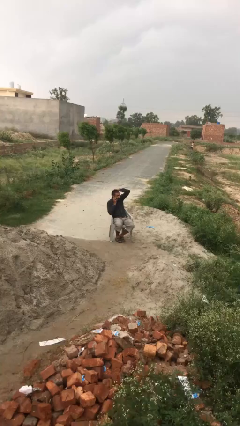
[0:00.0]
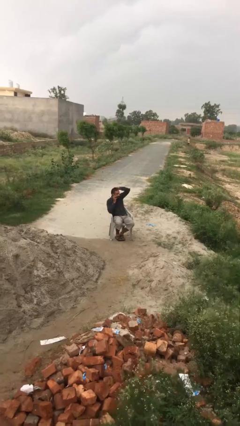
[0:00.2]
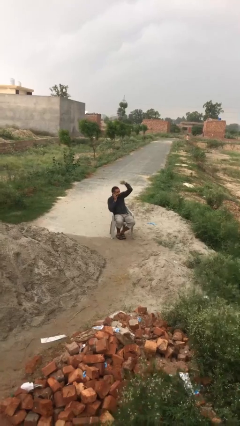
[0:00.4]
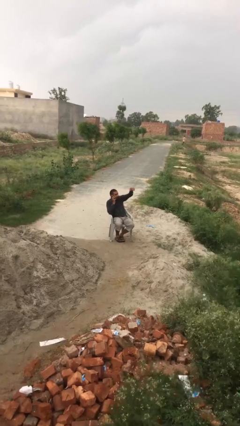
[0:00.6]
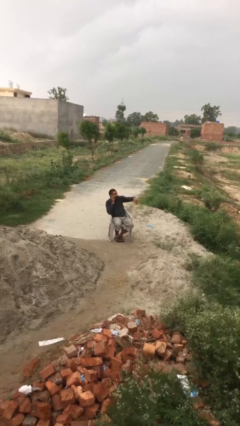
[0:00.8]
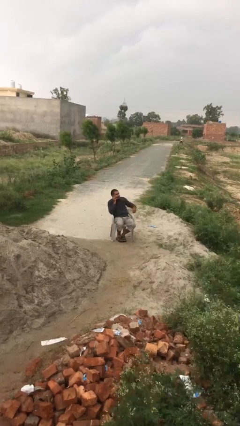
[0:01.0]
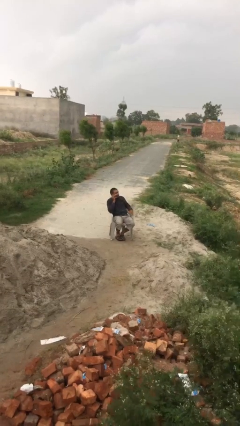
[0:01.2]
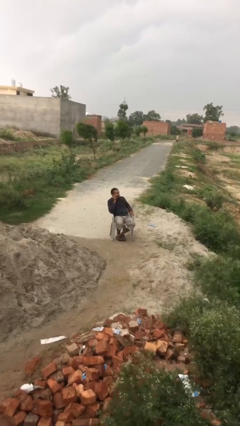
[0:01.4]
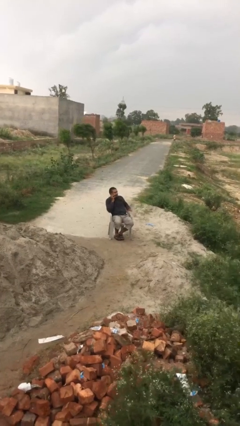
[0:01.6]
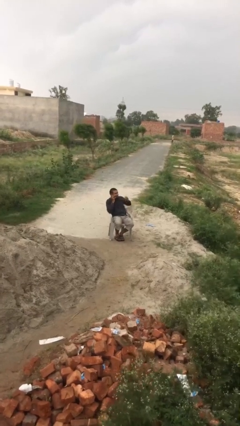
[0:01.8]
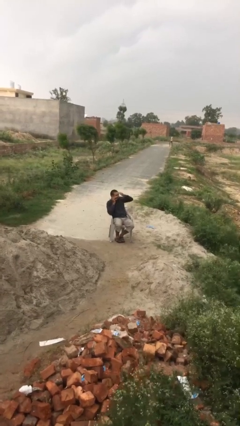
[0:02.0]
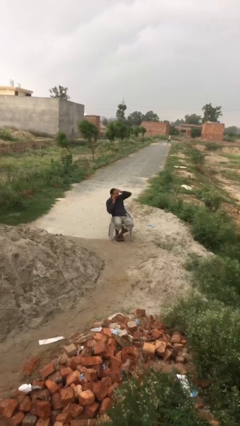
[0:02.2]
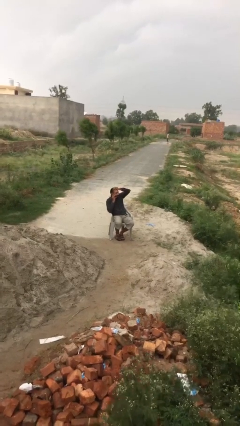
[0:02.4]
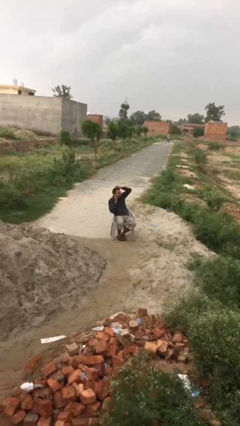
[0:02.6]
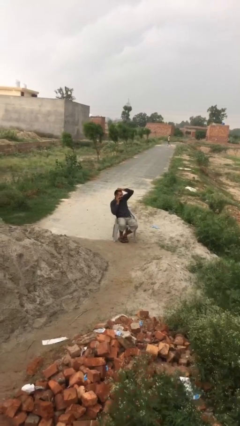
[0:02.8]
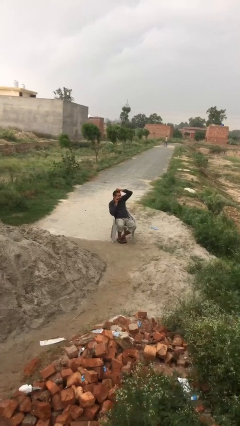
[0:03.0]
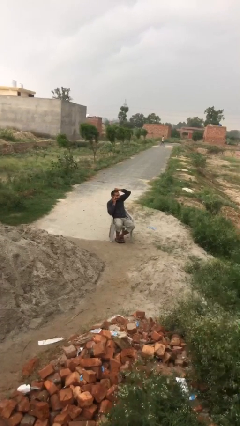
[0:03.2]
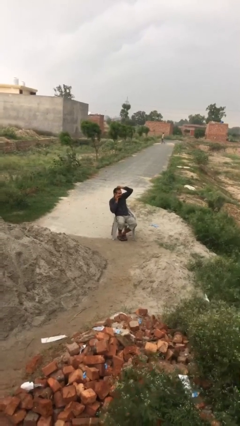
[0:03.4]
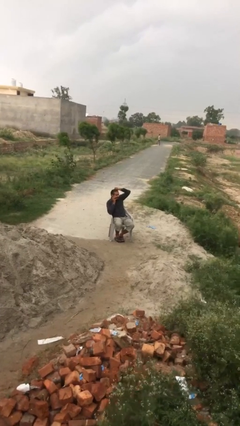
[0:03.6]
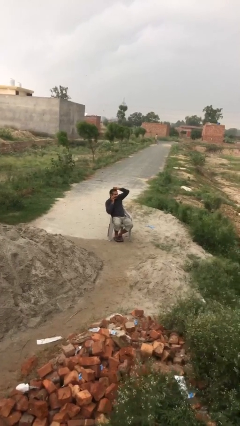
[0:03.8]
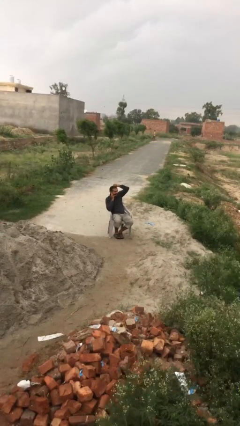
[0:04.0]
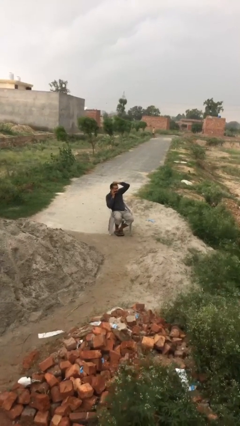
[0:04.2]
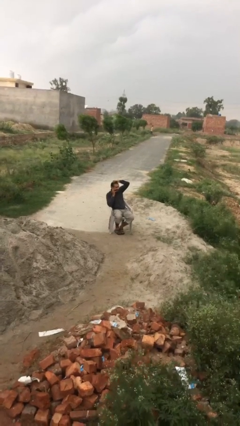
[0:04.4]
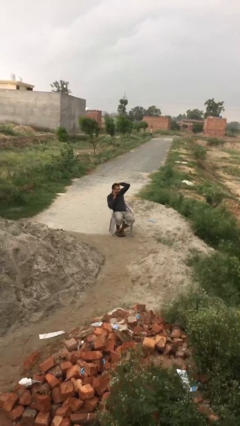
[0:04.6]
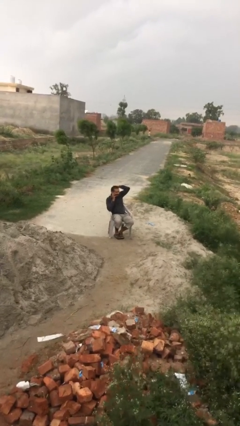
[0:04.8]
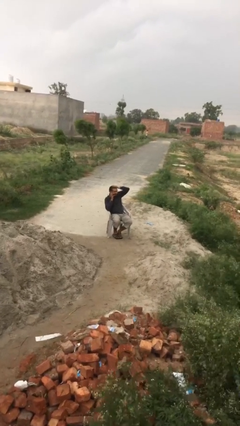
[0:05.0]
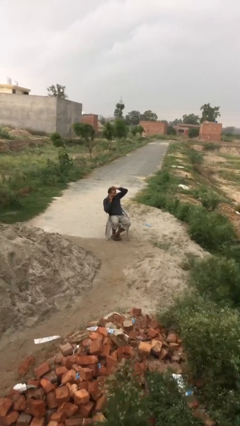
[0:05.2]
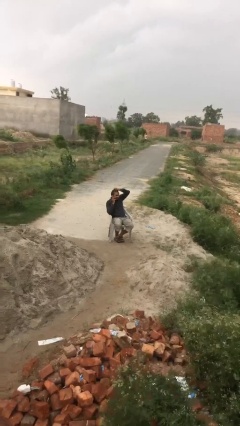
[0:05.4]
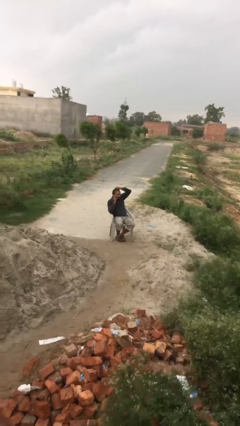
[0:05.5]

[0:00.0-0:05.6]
person talks on phone

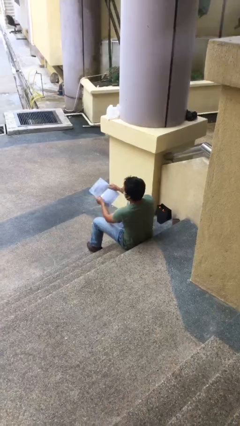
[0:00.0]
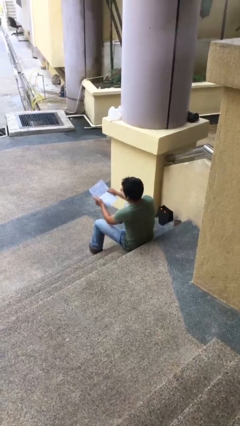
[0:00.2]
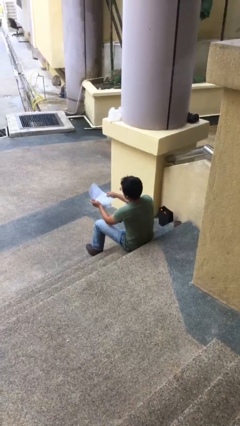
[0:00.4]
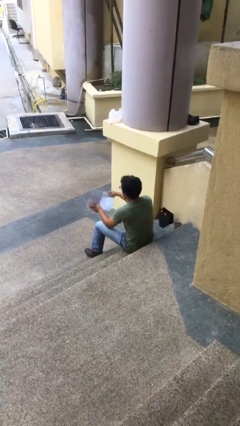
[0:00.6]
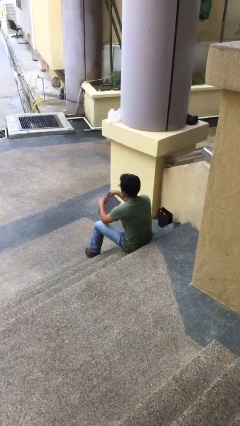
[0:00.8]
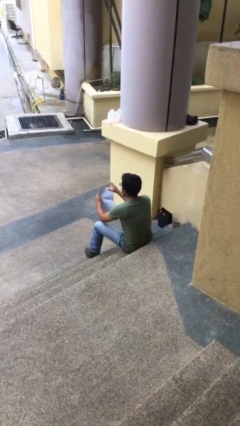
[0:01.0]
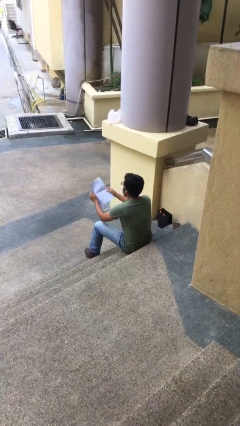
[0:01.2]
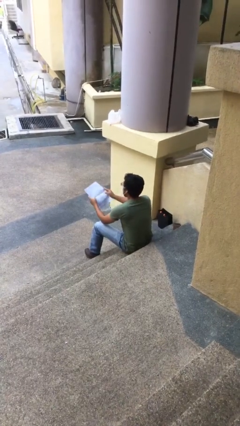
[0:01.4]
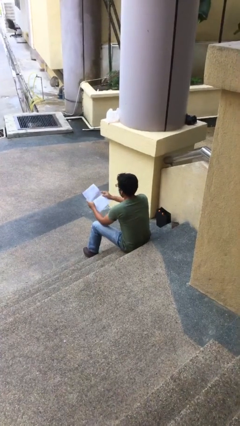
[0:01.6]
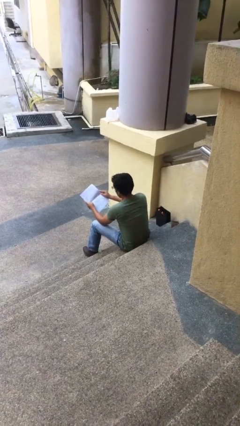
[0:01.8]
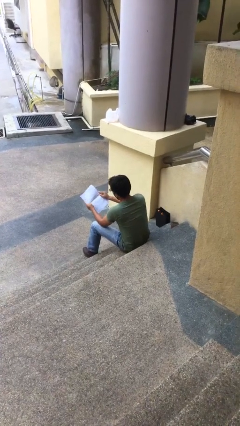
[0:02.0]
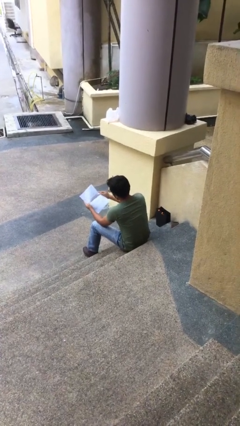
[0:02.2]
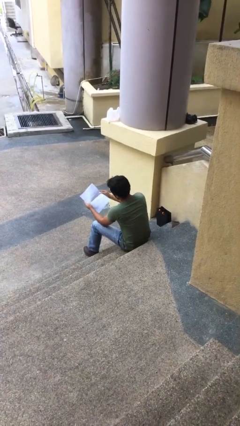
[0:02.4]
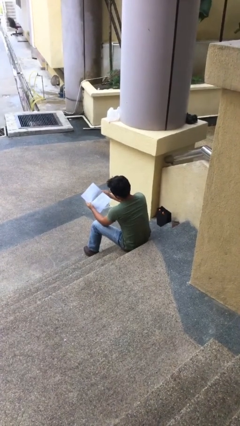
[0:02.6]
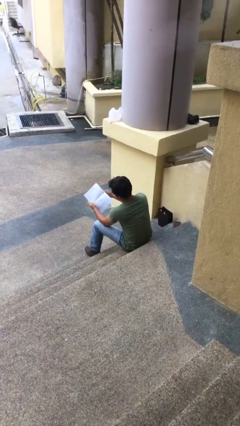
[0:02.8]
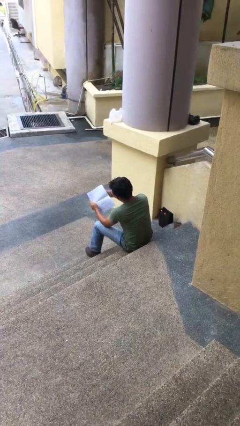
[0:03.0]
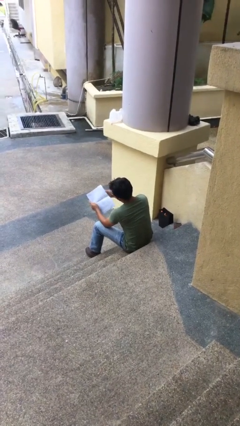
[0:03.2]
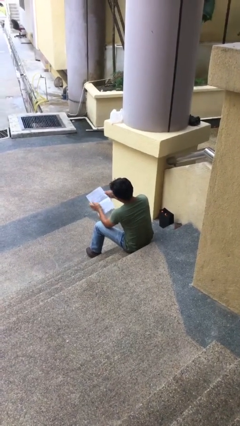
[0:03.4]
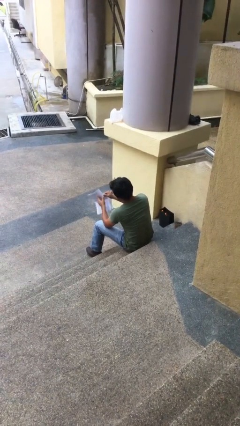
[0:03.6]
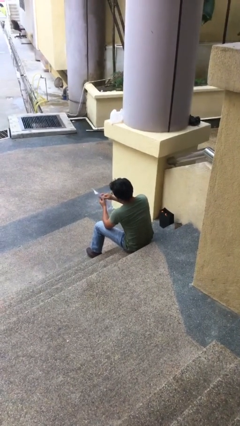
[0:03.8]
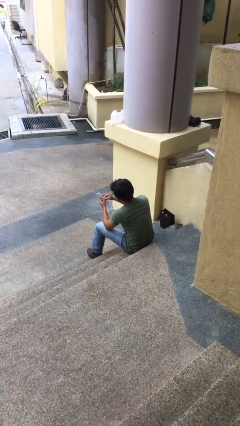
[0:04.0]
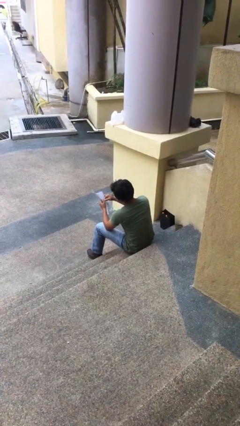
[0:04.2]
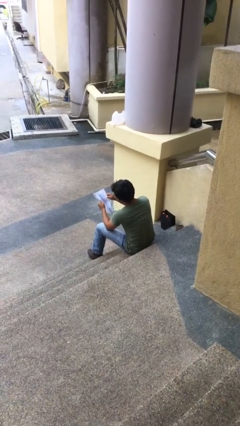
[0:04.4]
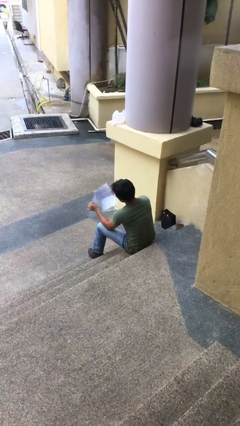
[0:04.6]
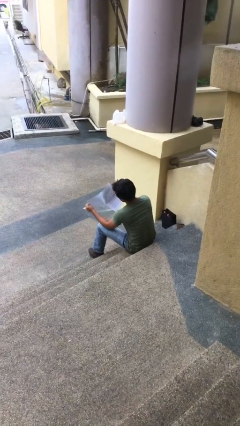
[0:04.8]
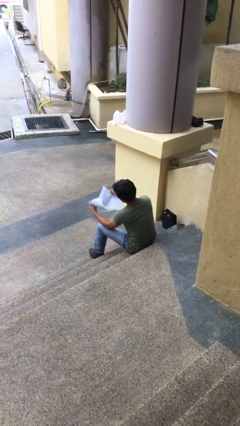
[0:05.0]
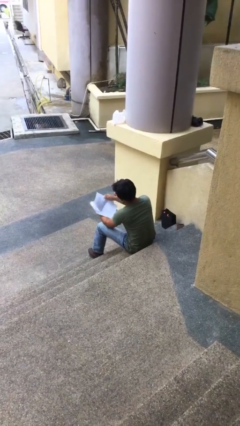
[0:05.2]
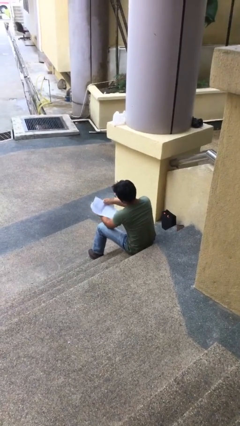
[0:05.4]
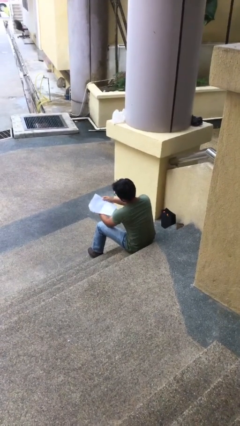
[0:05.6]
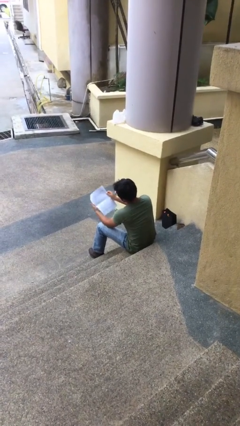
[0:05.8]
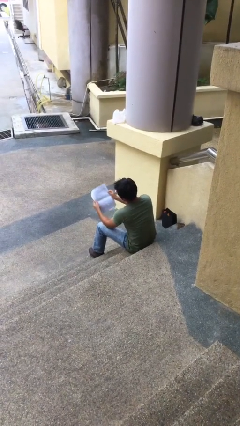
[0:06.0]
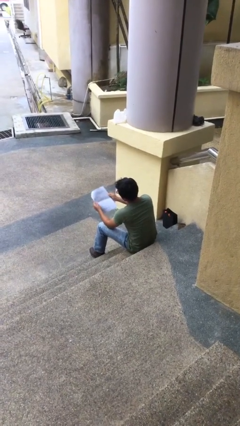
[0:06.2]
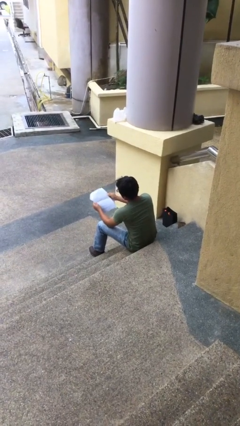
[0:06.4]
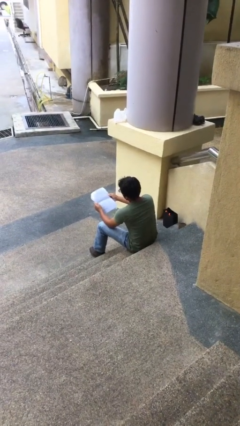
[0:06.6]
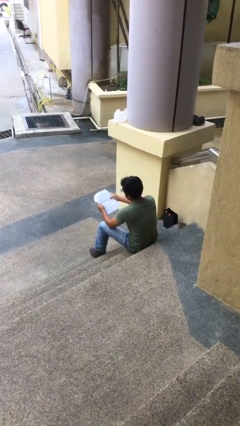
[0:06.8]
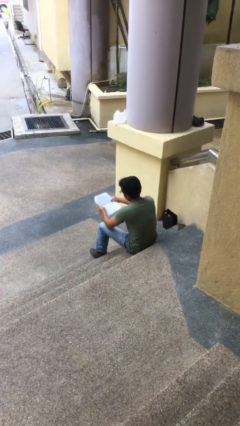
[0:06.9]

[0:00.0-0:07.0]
person reads document

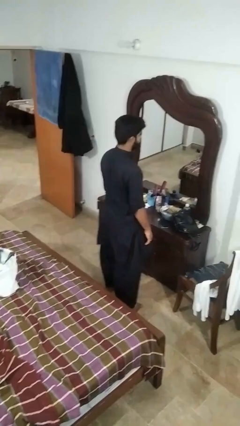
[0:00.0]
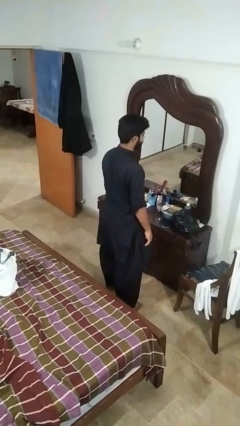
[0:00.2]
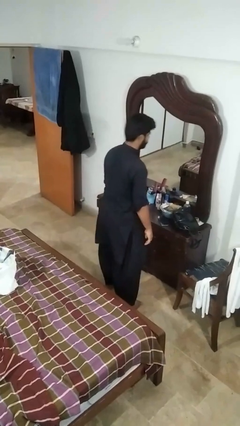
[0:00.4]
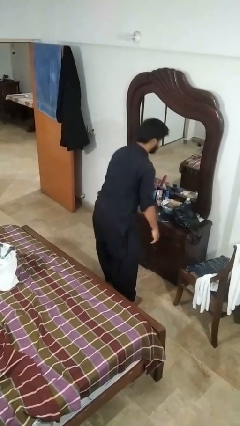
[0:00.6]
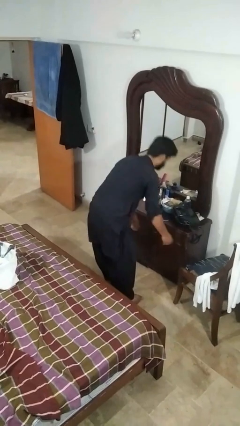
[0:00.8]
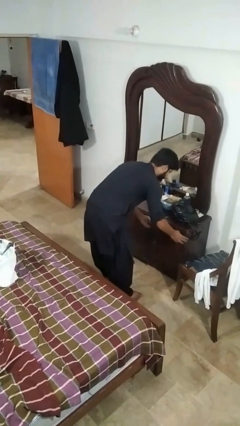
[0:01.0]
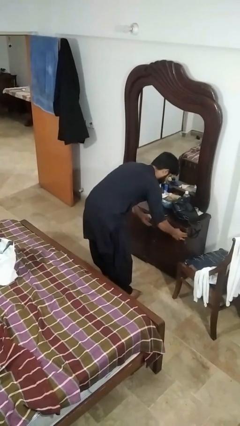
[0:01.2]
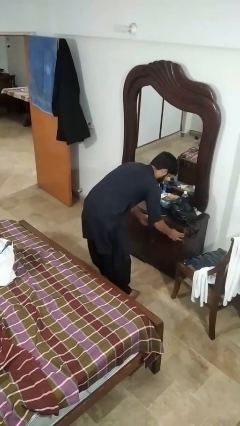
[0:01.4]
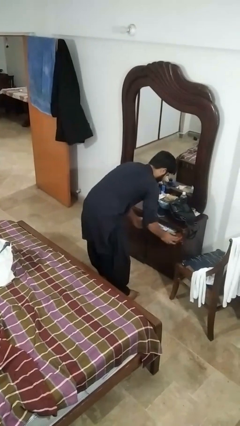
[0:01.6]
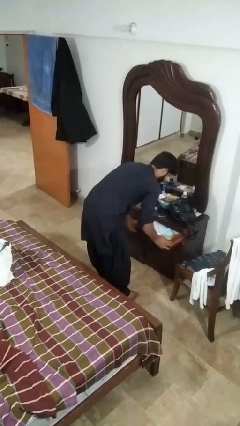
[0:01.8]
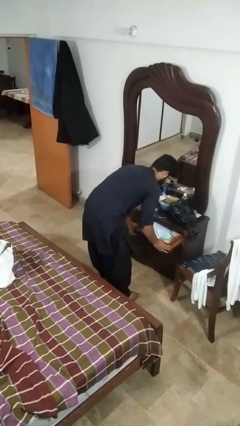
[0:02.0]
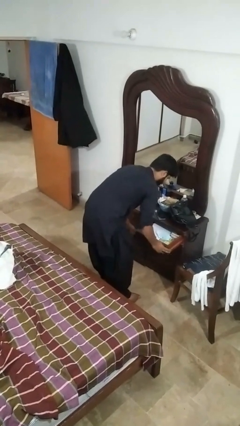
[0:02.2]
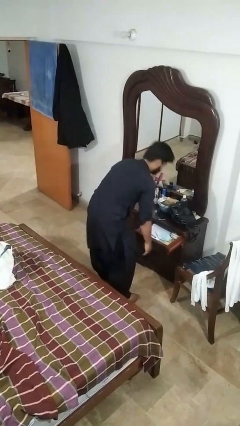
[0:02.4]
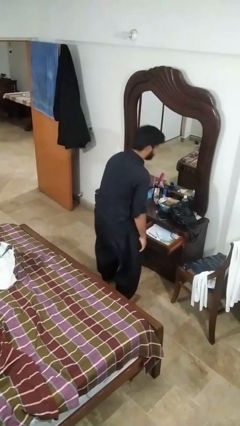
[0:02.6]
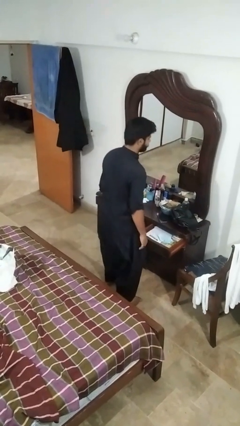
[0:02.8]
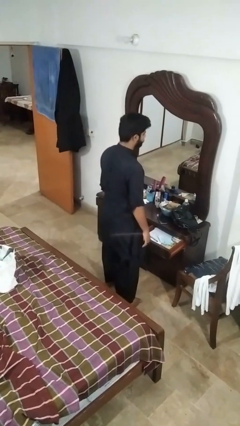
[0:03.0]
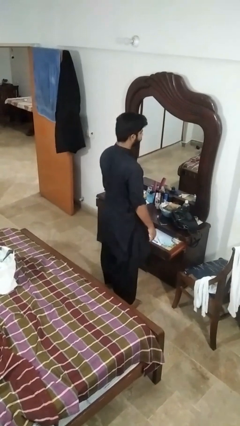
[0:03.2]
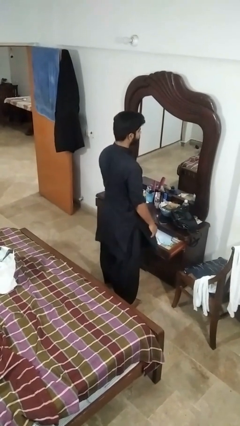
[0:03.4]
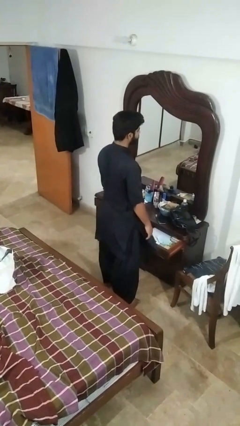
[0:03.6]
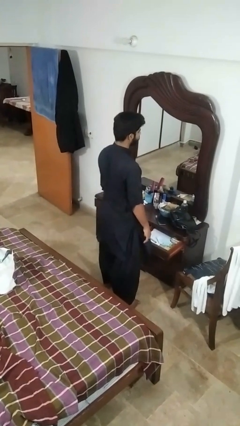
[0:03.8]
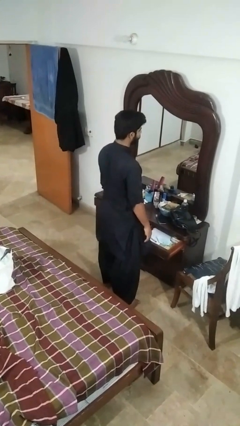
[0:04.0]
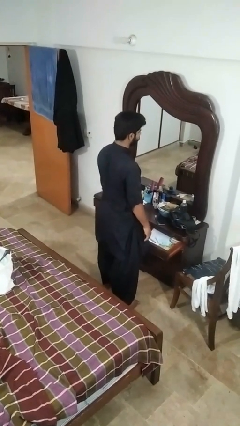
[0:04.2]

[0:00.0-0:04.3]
person opens dresser drawer

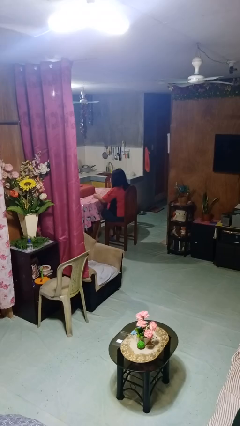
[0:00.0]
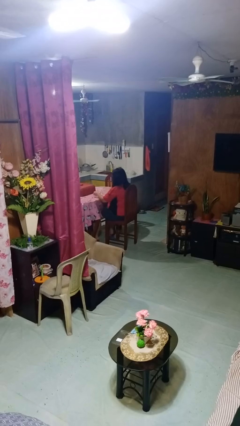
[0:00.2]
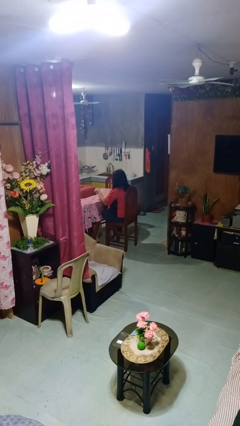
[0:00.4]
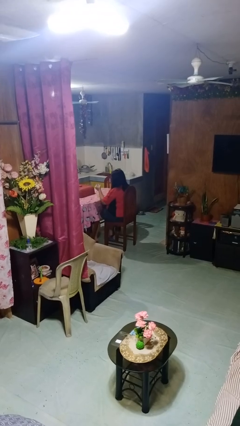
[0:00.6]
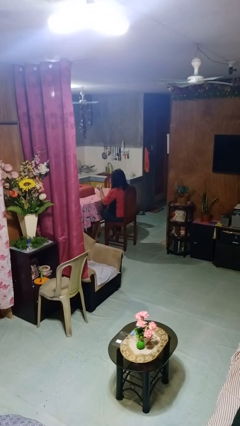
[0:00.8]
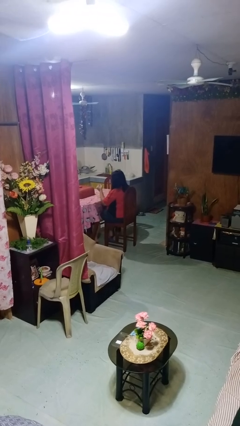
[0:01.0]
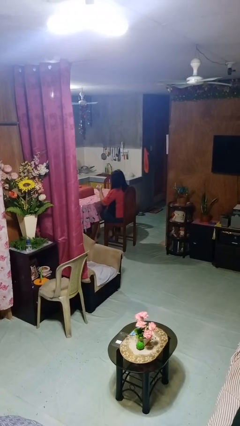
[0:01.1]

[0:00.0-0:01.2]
person picks up object from table

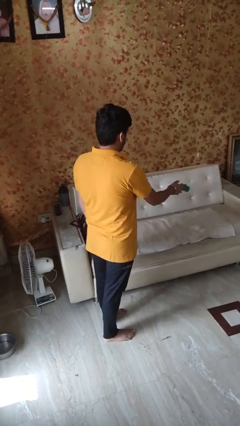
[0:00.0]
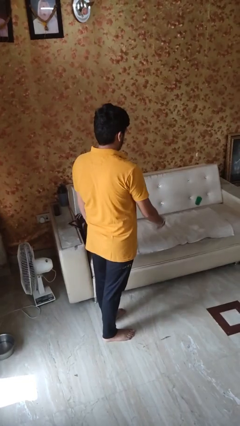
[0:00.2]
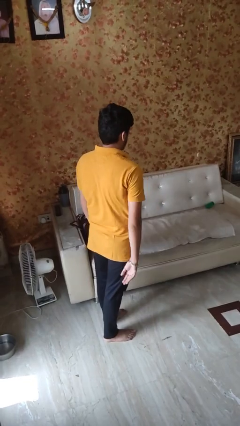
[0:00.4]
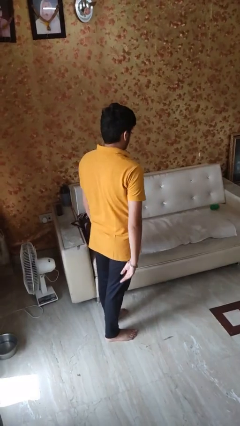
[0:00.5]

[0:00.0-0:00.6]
person throws object on bed
